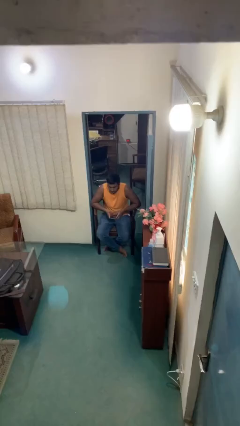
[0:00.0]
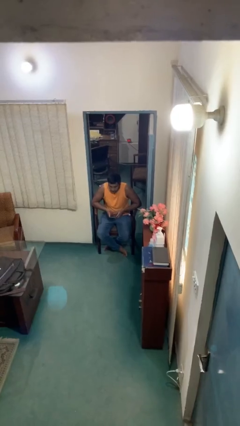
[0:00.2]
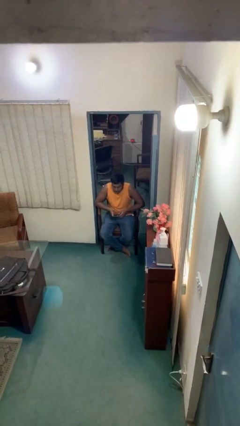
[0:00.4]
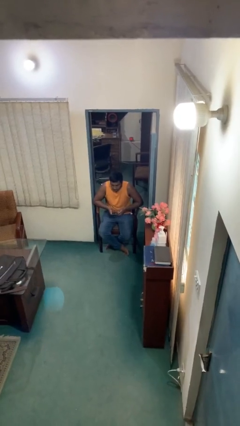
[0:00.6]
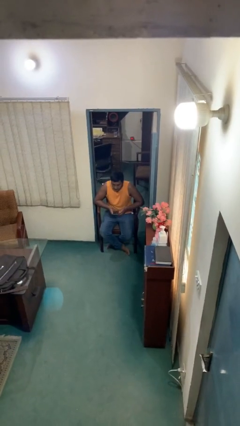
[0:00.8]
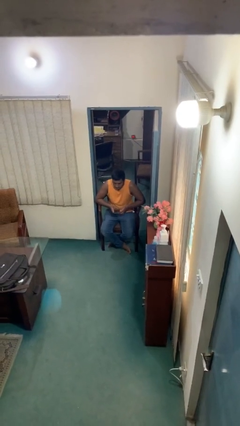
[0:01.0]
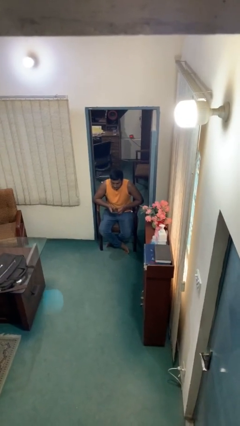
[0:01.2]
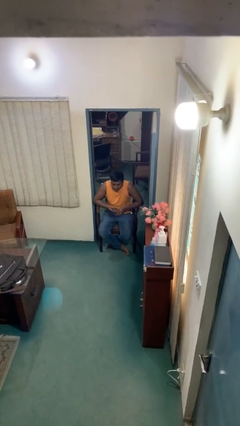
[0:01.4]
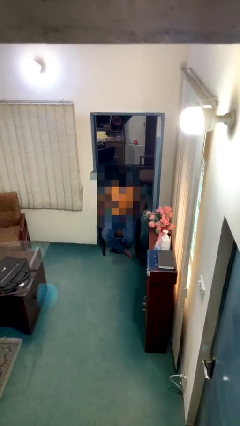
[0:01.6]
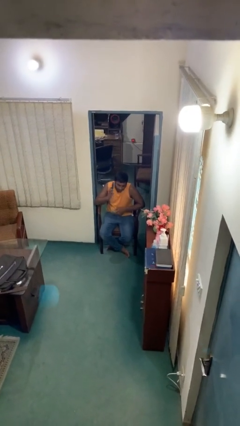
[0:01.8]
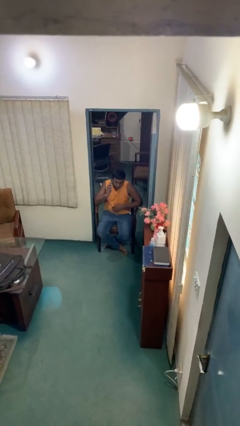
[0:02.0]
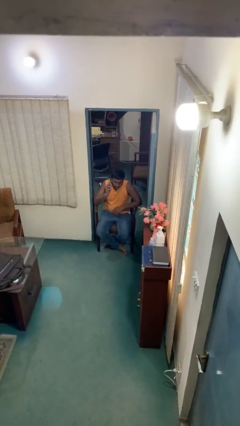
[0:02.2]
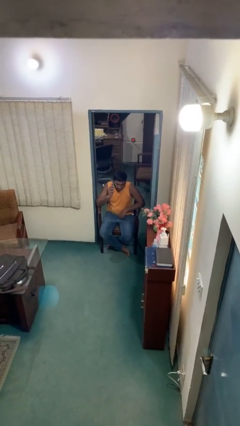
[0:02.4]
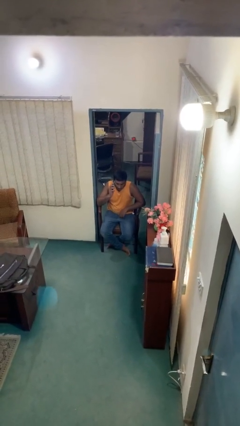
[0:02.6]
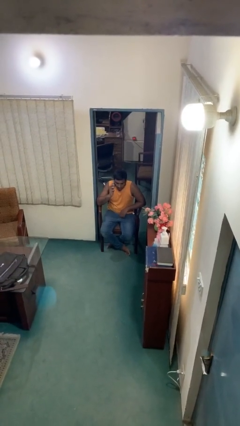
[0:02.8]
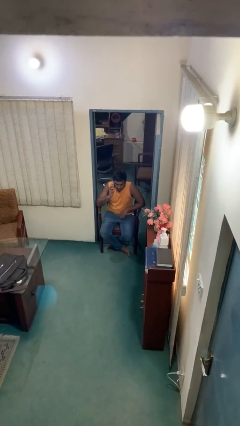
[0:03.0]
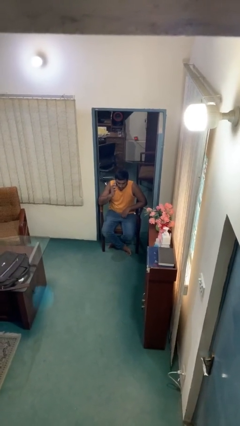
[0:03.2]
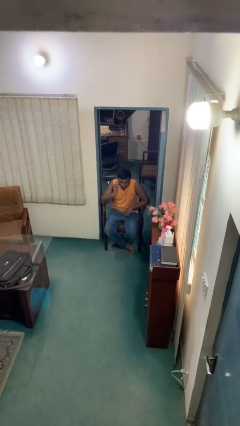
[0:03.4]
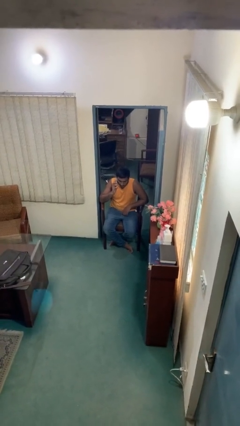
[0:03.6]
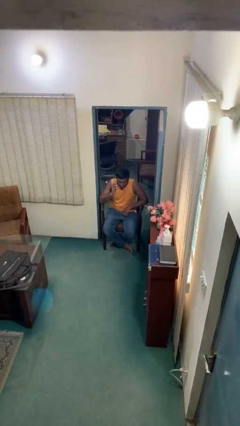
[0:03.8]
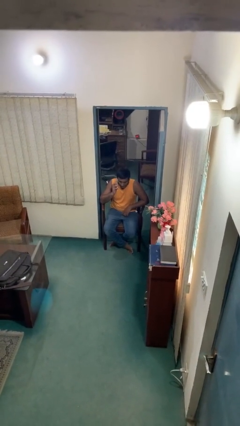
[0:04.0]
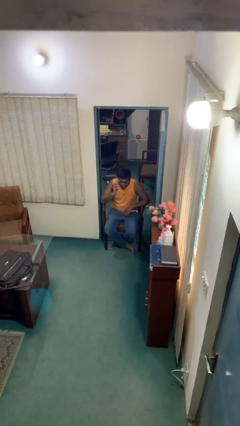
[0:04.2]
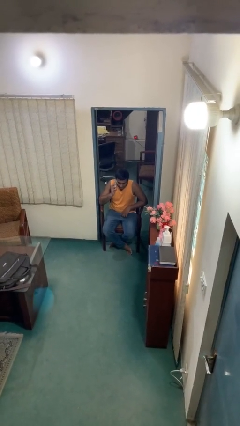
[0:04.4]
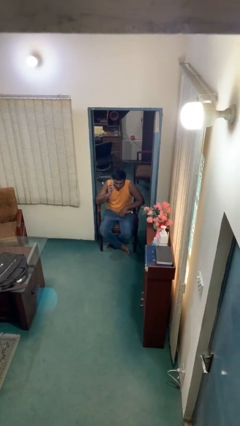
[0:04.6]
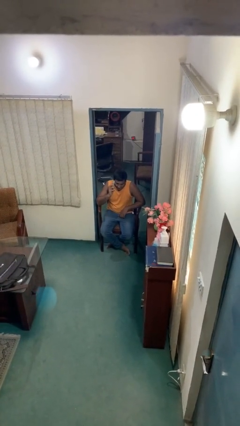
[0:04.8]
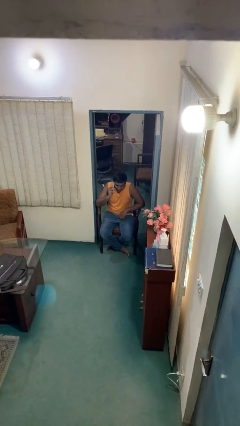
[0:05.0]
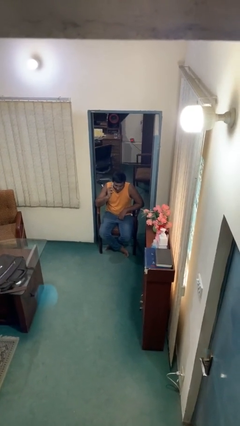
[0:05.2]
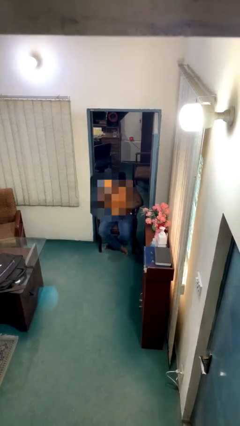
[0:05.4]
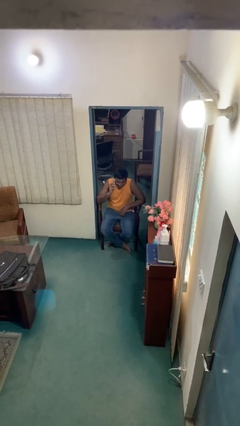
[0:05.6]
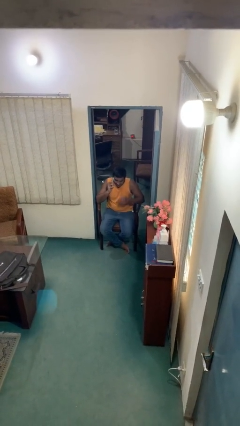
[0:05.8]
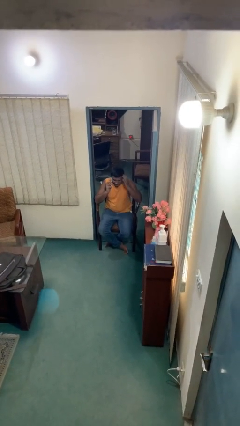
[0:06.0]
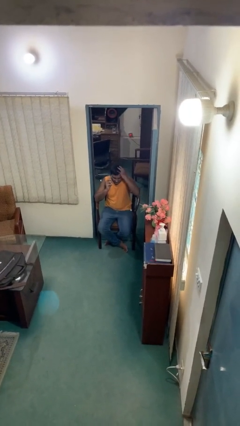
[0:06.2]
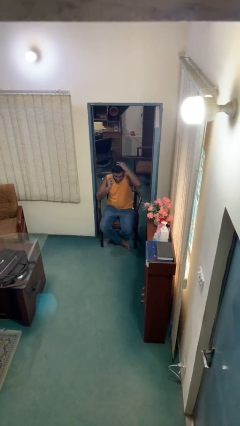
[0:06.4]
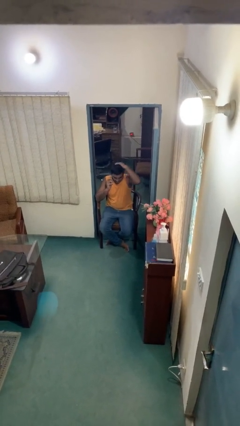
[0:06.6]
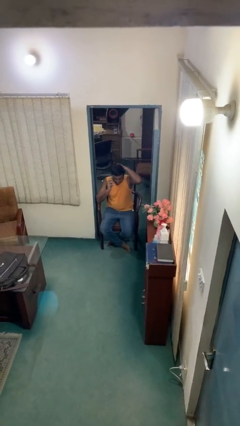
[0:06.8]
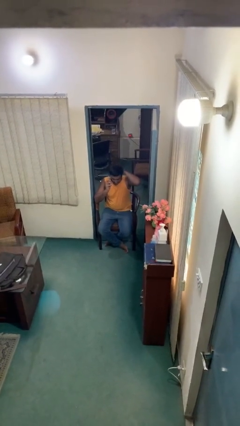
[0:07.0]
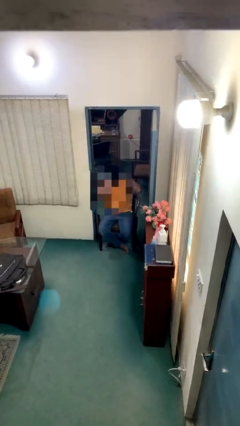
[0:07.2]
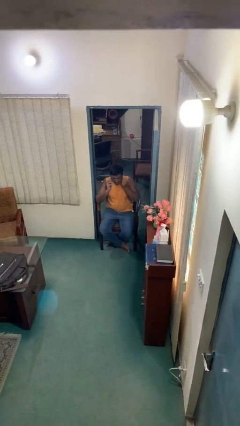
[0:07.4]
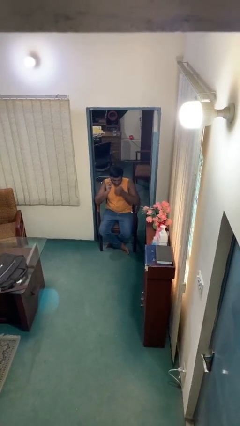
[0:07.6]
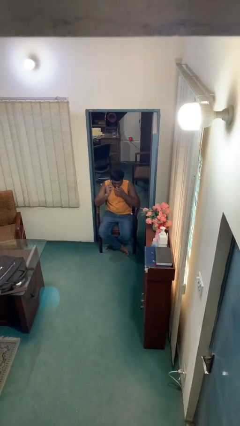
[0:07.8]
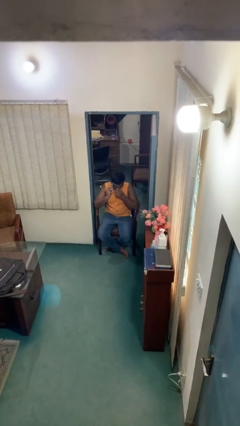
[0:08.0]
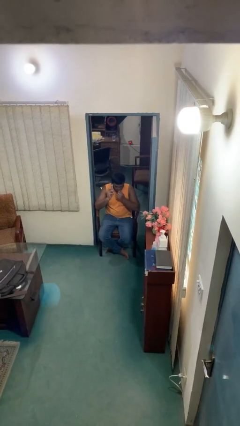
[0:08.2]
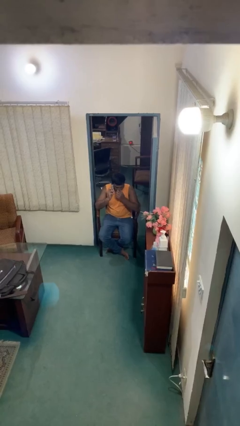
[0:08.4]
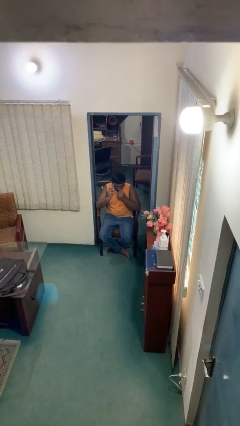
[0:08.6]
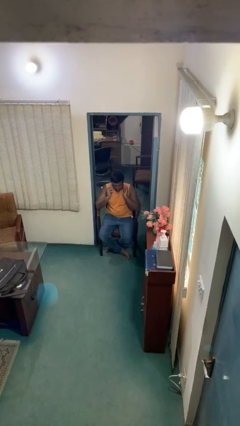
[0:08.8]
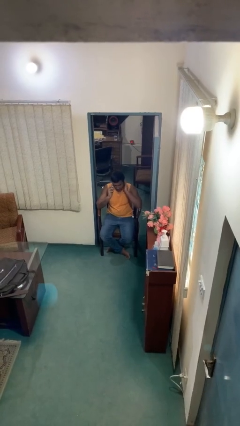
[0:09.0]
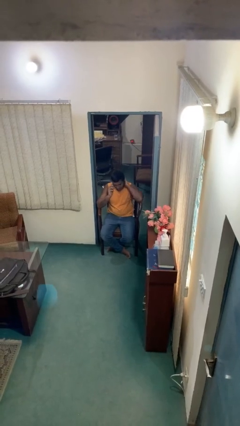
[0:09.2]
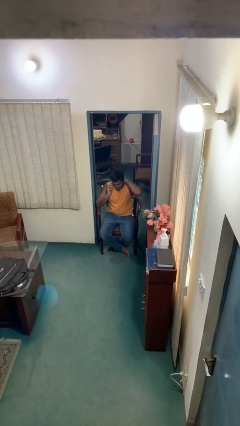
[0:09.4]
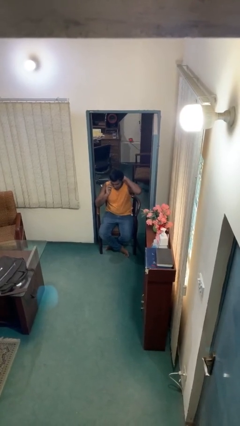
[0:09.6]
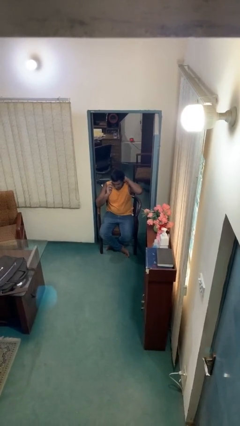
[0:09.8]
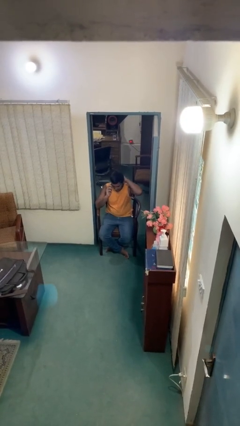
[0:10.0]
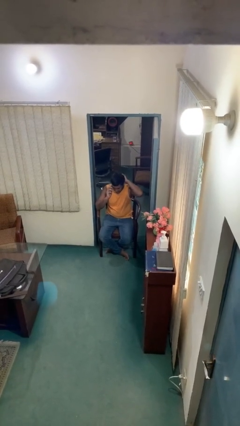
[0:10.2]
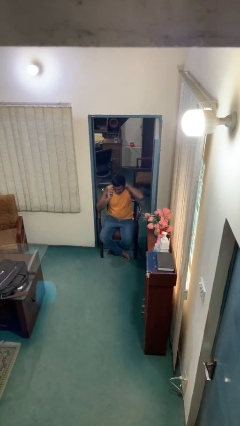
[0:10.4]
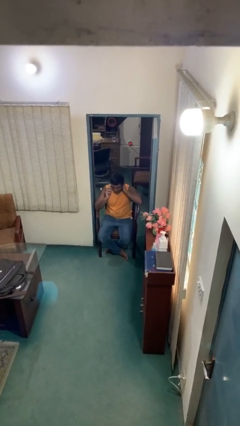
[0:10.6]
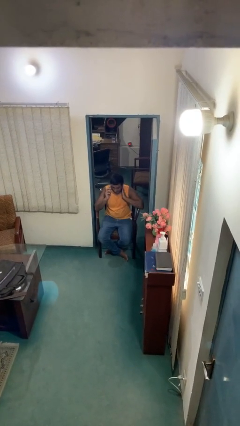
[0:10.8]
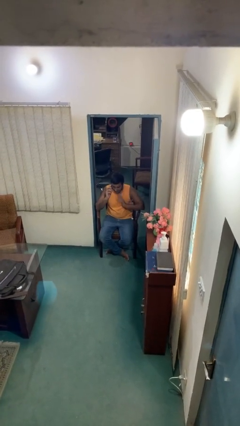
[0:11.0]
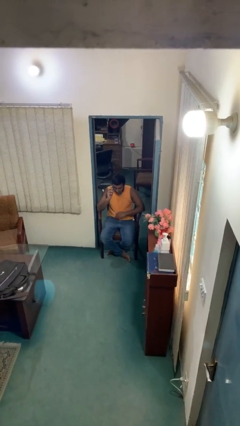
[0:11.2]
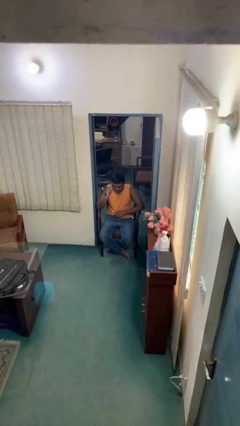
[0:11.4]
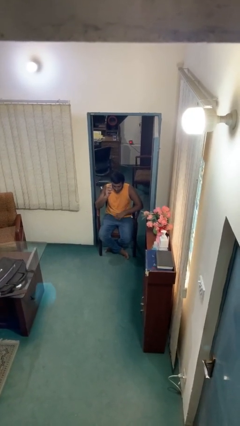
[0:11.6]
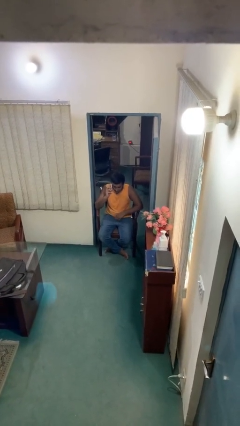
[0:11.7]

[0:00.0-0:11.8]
person talks on phone

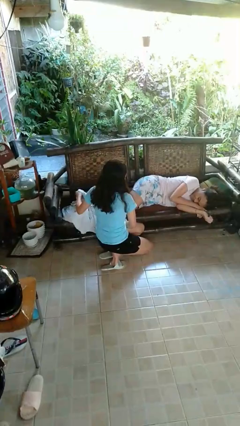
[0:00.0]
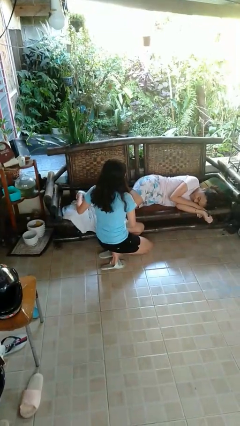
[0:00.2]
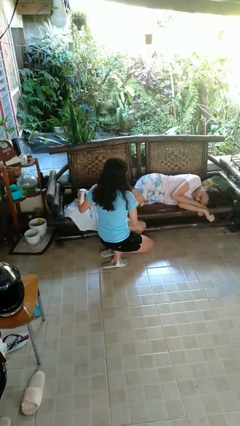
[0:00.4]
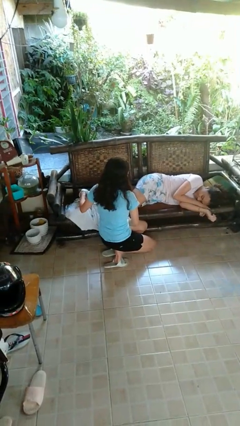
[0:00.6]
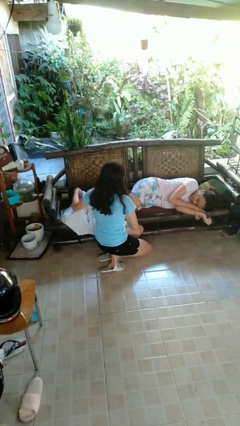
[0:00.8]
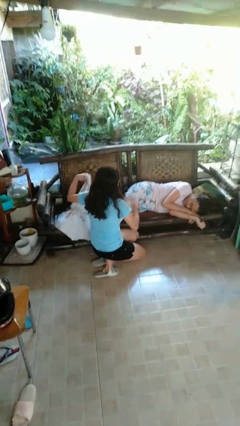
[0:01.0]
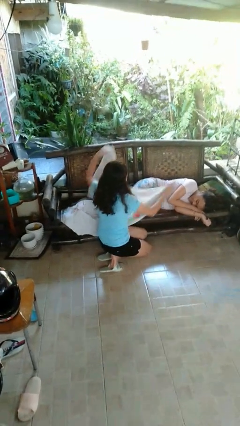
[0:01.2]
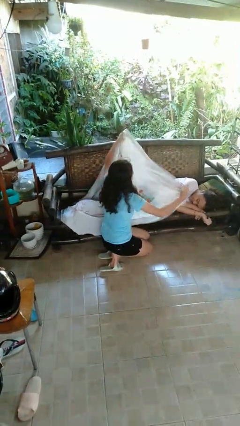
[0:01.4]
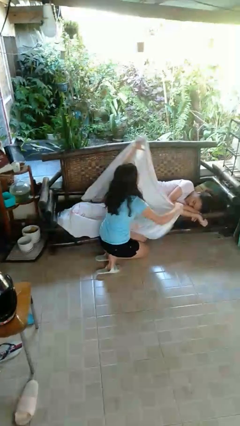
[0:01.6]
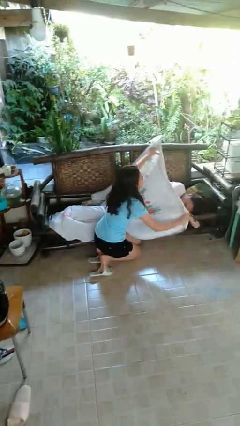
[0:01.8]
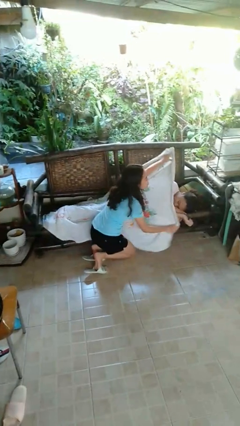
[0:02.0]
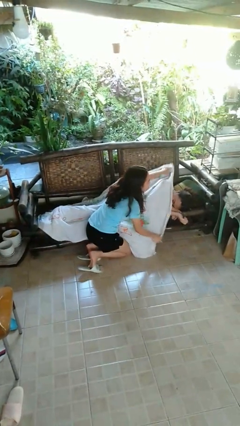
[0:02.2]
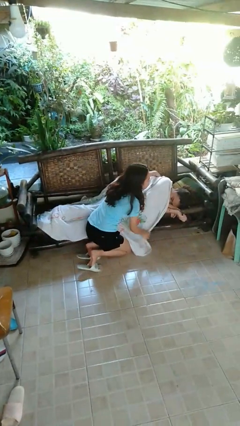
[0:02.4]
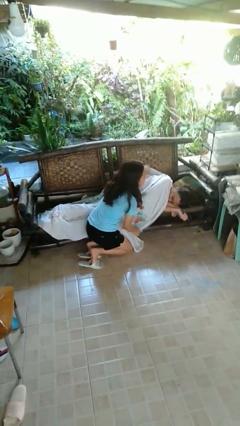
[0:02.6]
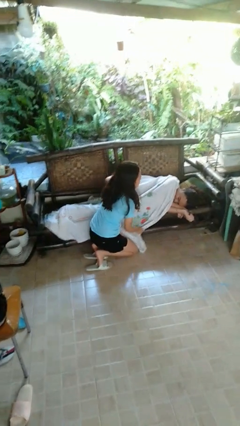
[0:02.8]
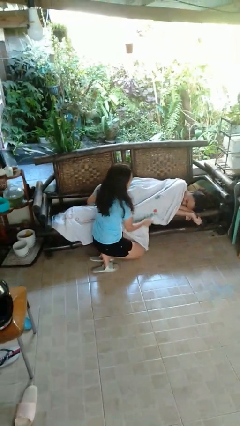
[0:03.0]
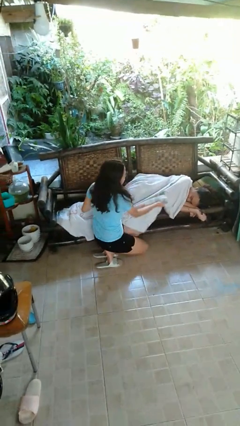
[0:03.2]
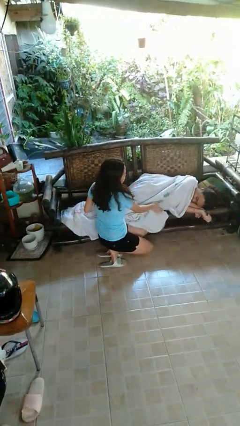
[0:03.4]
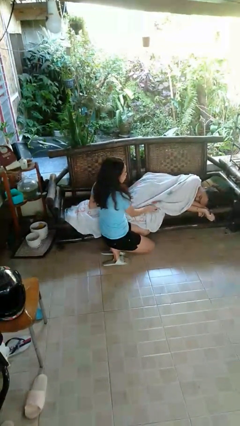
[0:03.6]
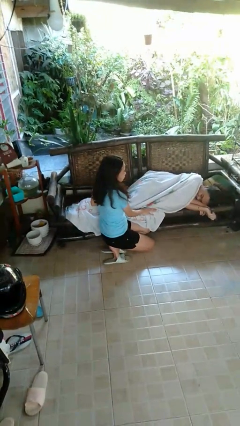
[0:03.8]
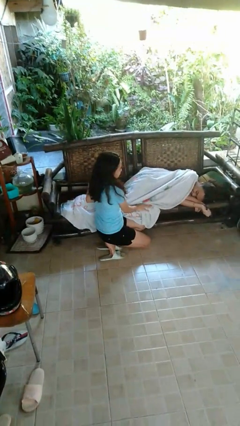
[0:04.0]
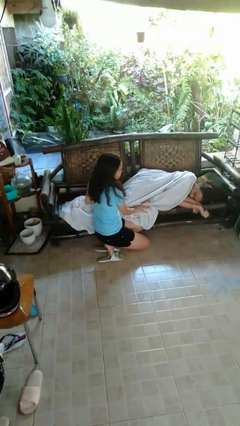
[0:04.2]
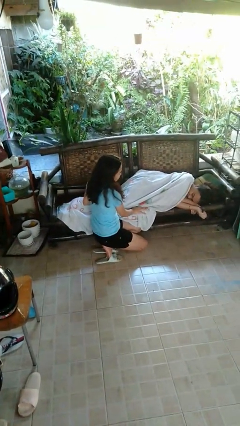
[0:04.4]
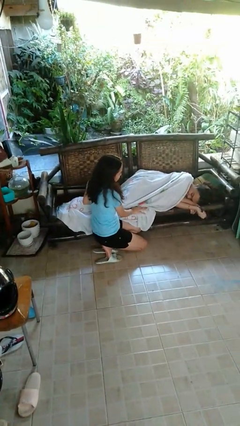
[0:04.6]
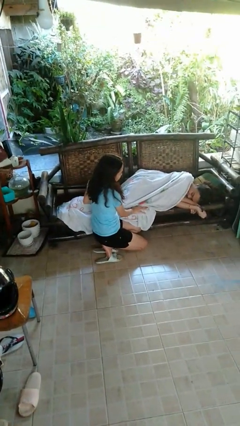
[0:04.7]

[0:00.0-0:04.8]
person covers friend with blanket

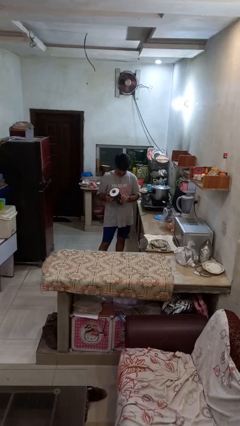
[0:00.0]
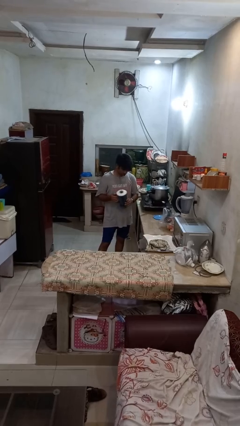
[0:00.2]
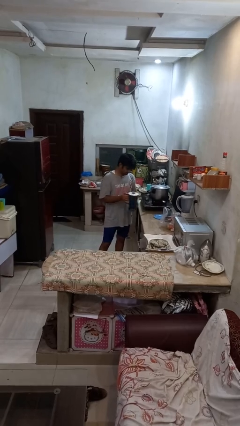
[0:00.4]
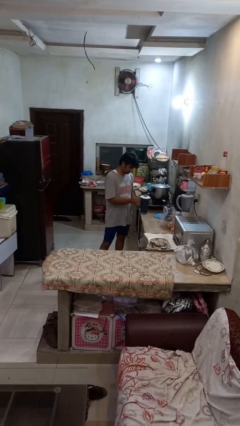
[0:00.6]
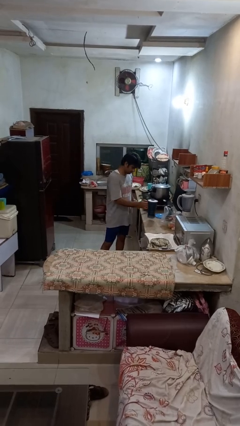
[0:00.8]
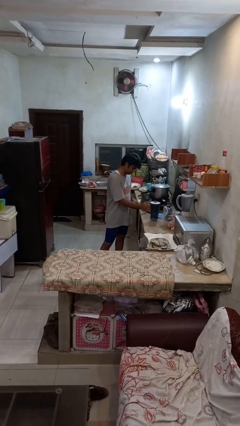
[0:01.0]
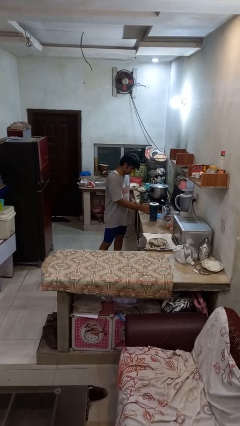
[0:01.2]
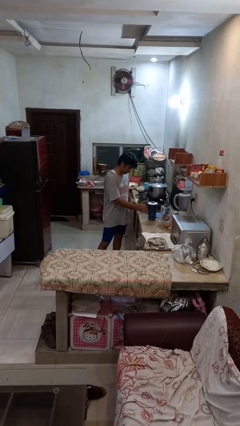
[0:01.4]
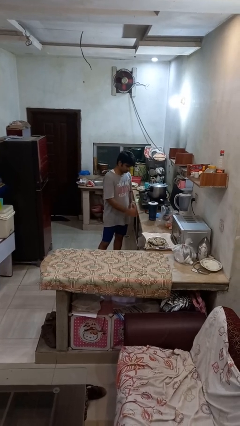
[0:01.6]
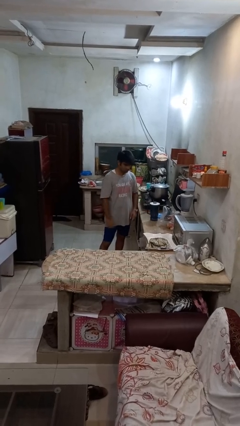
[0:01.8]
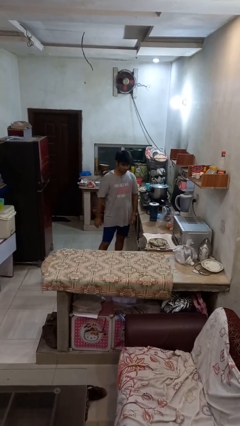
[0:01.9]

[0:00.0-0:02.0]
person puts down object on countertop
